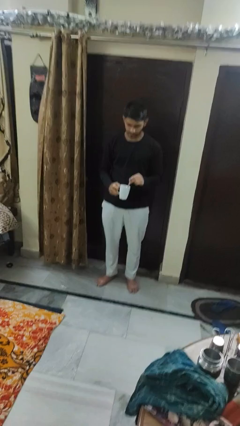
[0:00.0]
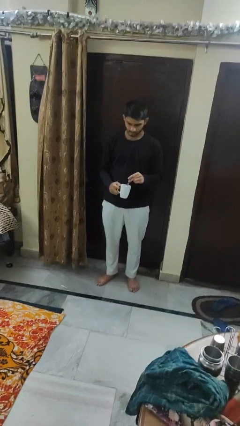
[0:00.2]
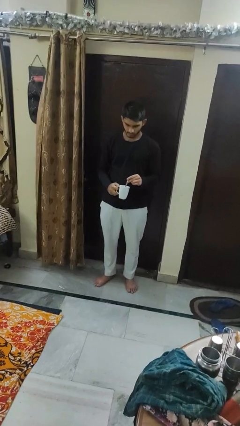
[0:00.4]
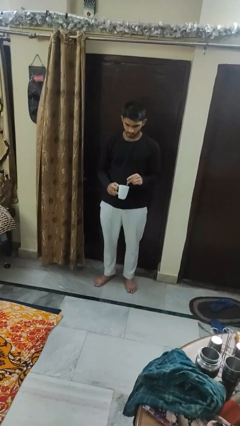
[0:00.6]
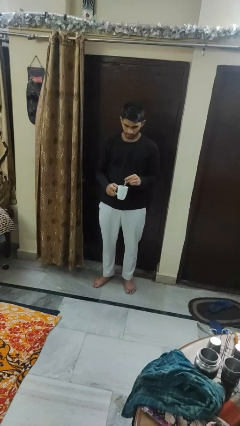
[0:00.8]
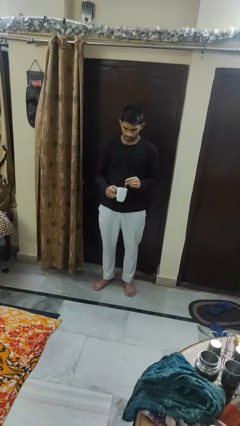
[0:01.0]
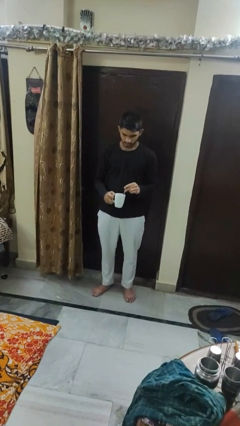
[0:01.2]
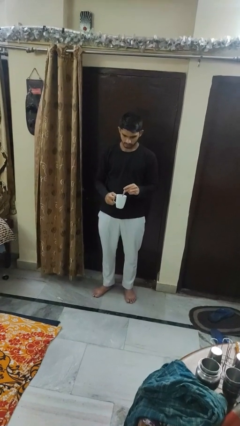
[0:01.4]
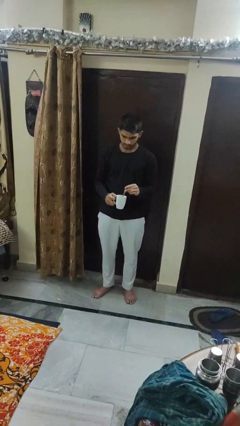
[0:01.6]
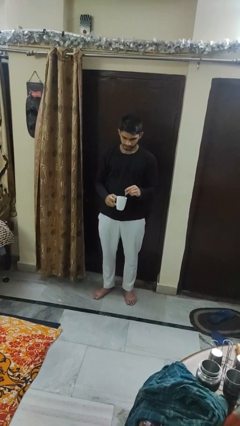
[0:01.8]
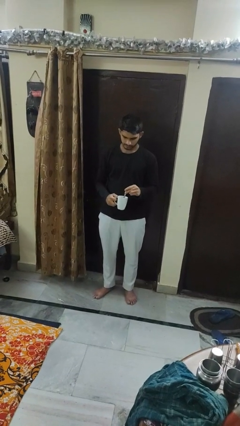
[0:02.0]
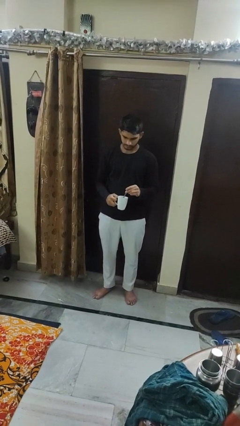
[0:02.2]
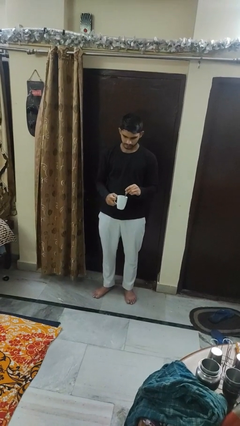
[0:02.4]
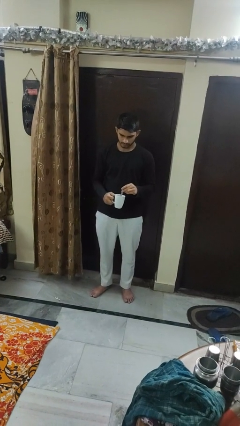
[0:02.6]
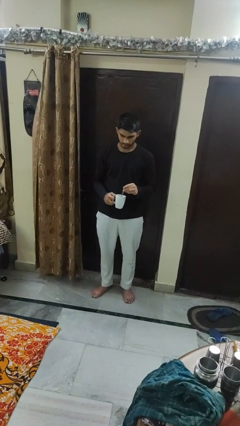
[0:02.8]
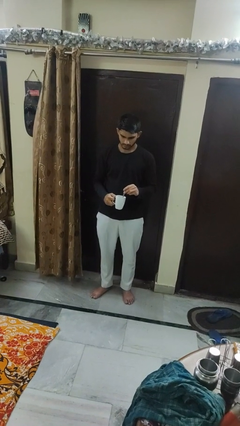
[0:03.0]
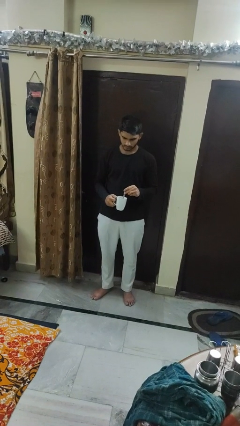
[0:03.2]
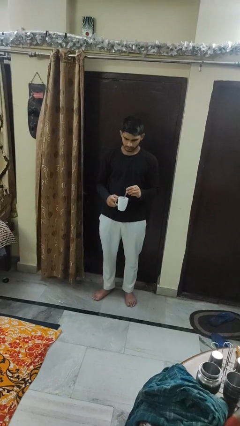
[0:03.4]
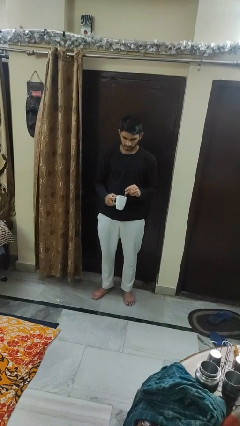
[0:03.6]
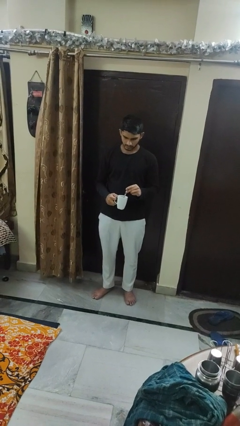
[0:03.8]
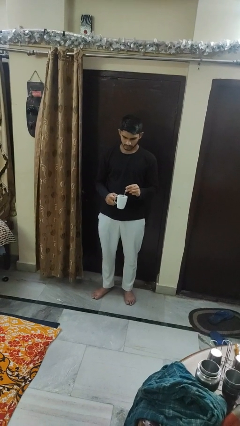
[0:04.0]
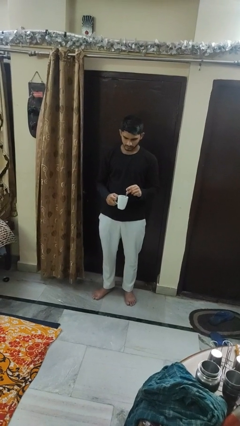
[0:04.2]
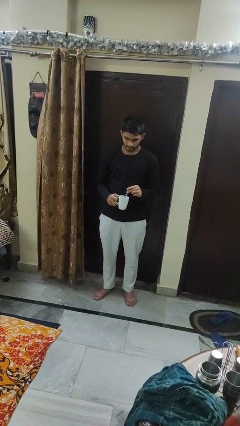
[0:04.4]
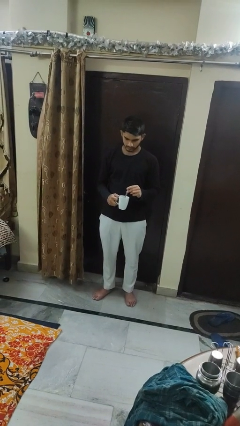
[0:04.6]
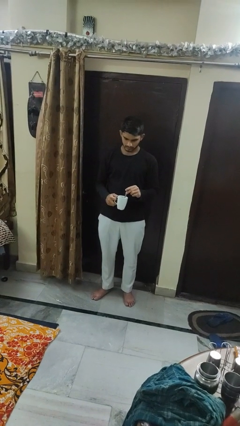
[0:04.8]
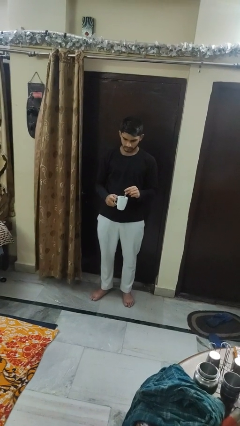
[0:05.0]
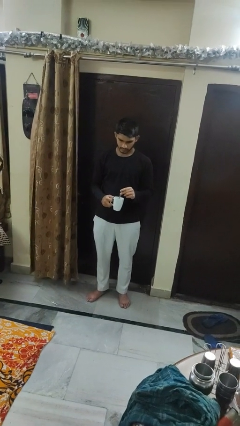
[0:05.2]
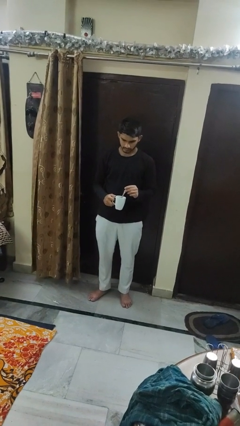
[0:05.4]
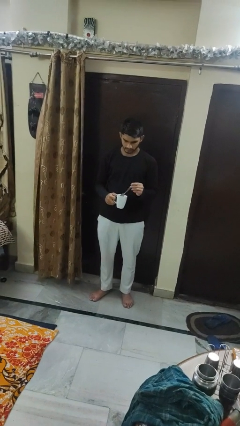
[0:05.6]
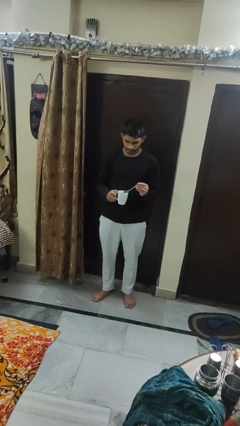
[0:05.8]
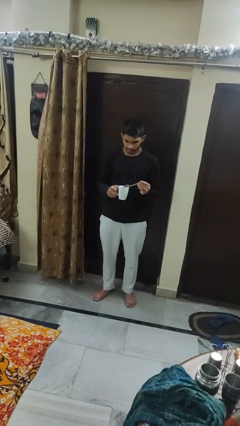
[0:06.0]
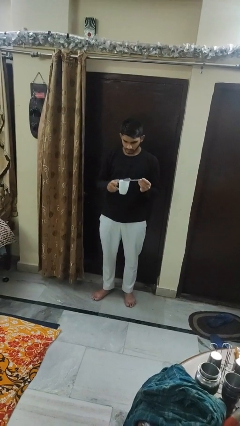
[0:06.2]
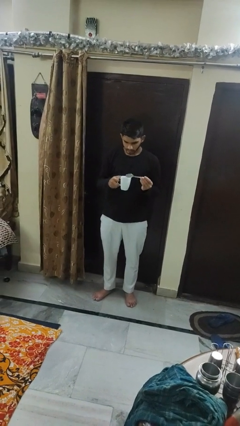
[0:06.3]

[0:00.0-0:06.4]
person stirs mug

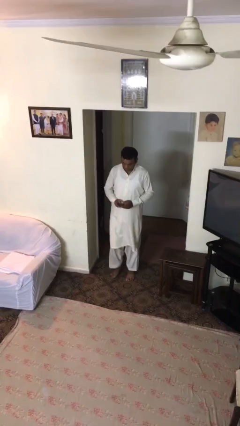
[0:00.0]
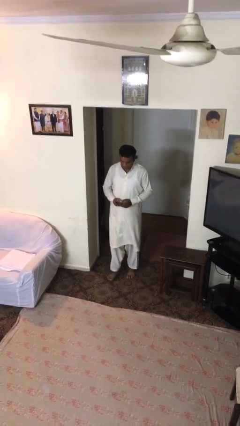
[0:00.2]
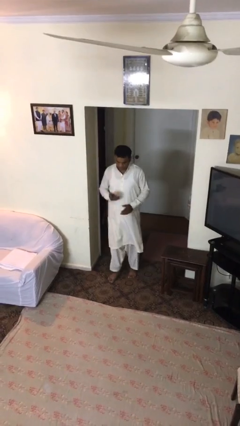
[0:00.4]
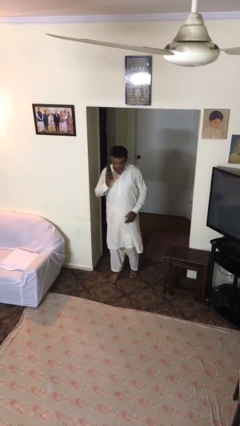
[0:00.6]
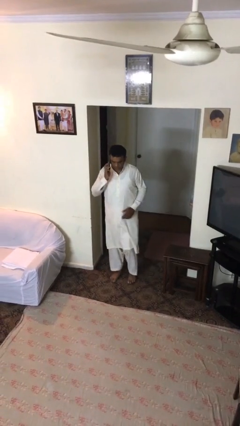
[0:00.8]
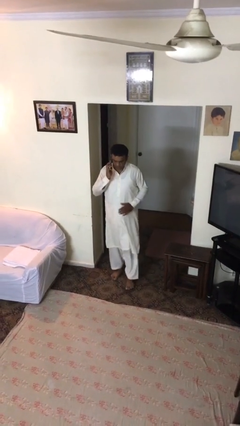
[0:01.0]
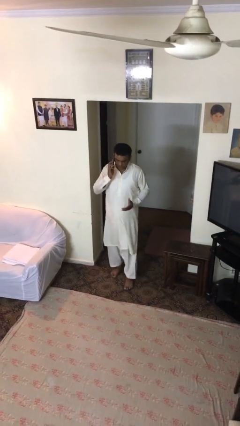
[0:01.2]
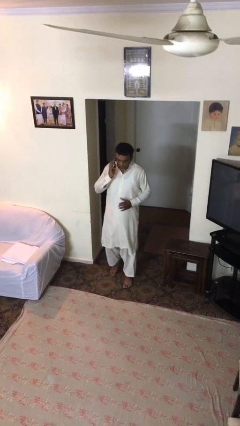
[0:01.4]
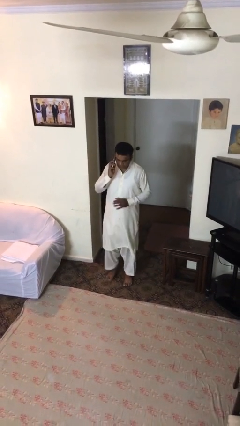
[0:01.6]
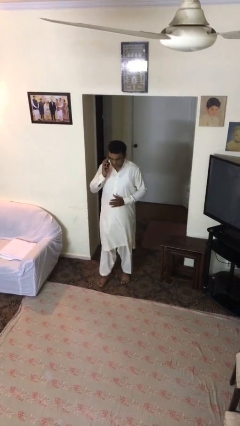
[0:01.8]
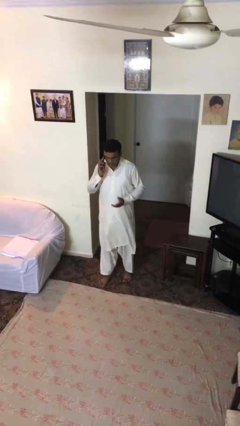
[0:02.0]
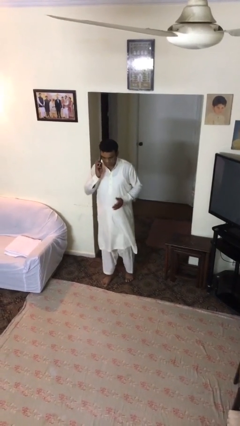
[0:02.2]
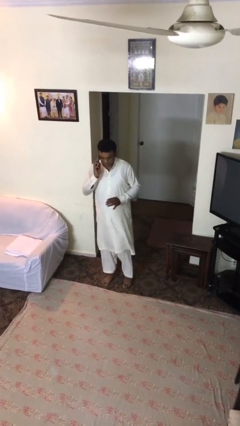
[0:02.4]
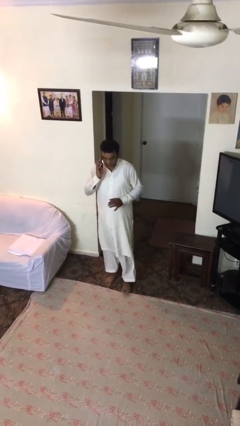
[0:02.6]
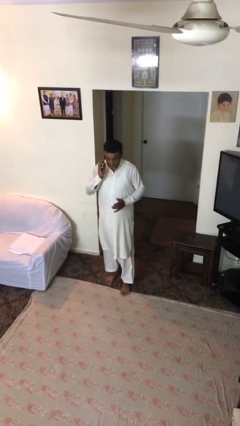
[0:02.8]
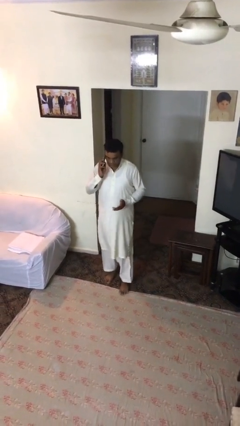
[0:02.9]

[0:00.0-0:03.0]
person talks on phone

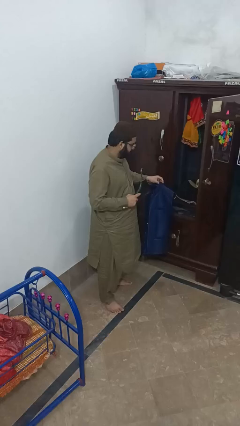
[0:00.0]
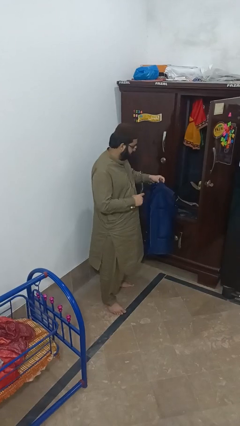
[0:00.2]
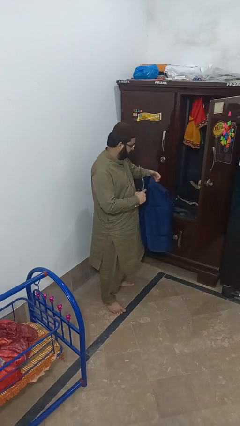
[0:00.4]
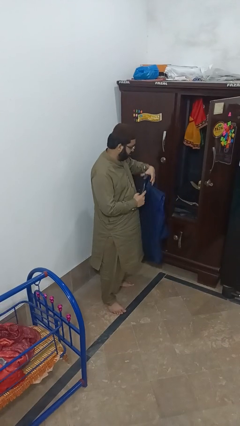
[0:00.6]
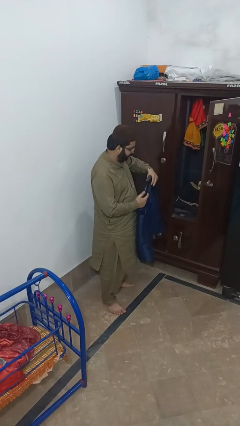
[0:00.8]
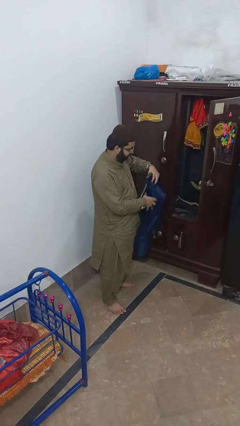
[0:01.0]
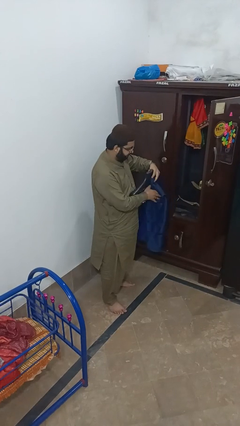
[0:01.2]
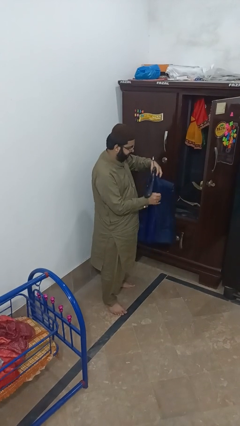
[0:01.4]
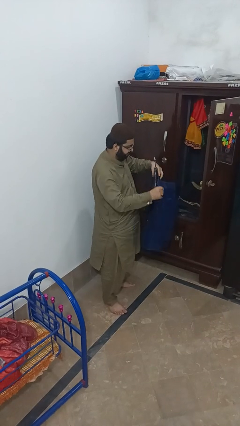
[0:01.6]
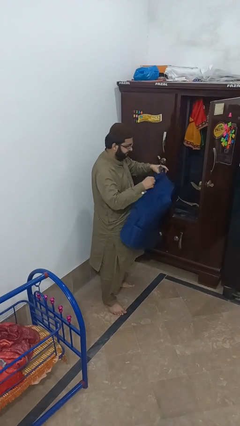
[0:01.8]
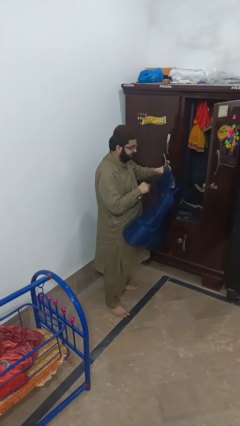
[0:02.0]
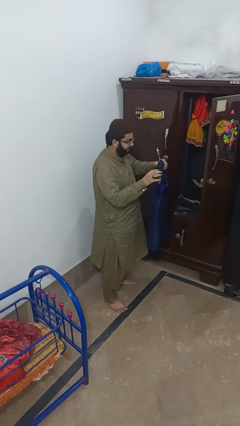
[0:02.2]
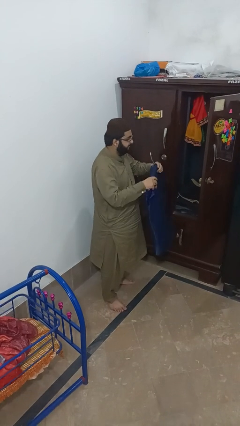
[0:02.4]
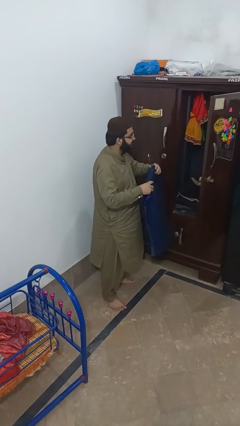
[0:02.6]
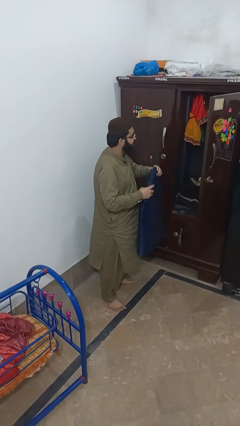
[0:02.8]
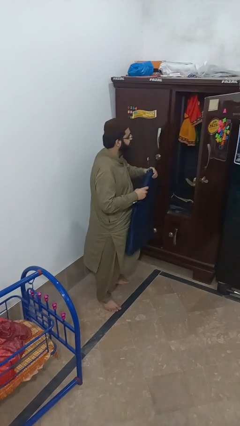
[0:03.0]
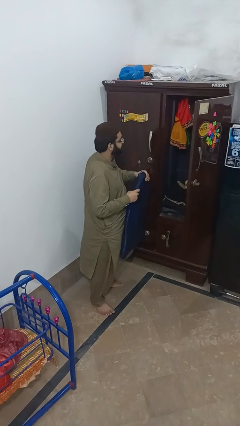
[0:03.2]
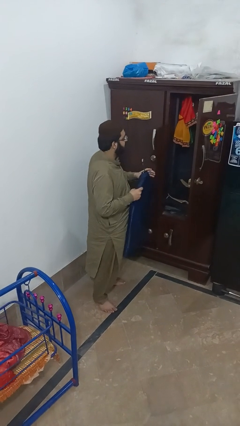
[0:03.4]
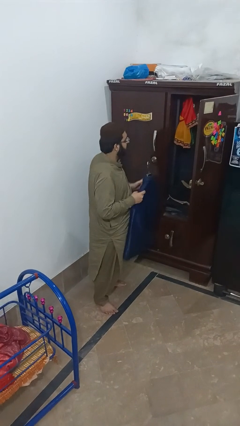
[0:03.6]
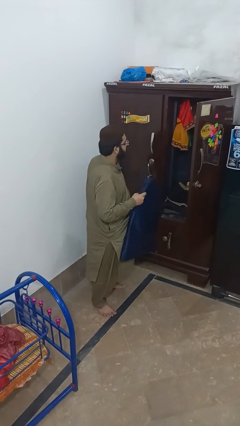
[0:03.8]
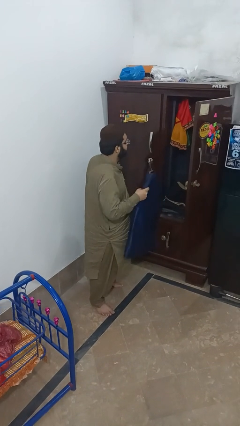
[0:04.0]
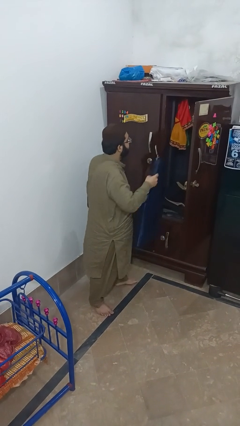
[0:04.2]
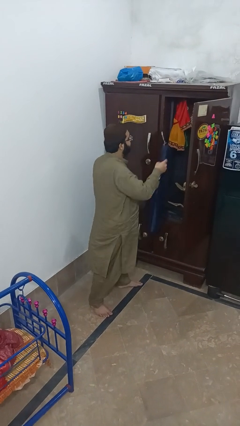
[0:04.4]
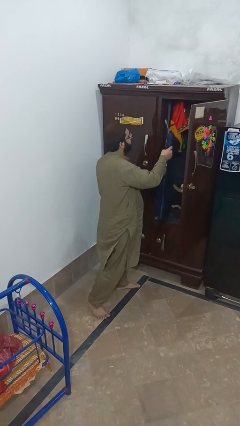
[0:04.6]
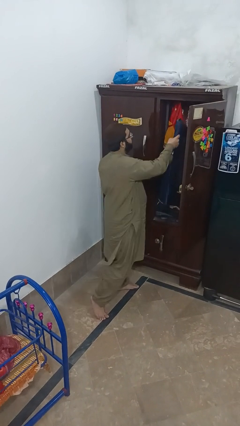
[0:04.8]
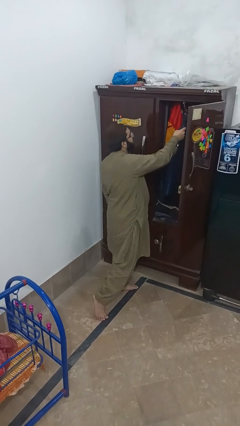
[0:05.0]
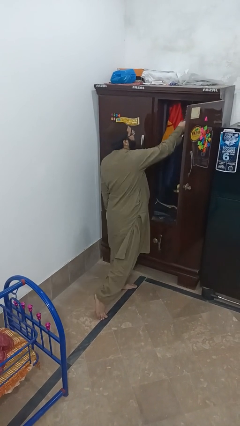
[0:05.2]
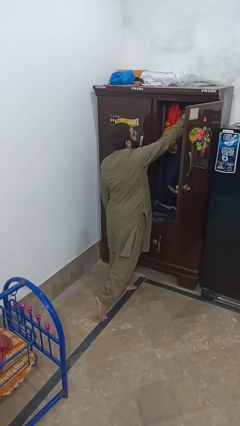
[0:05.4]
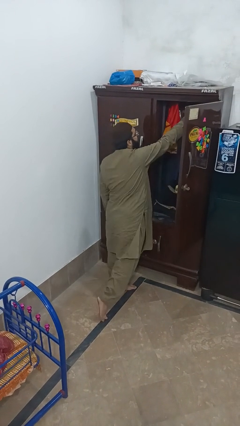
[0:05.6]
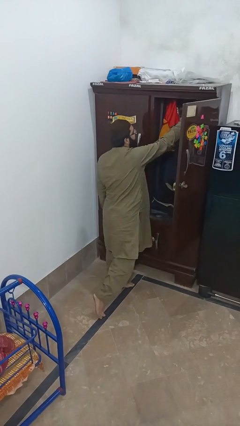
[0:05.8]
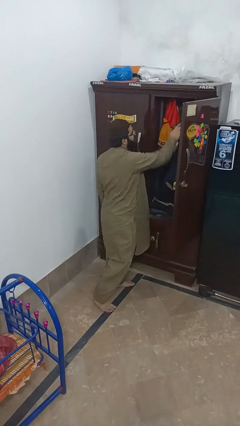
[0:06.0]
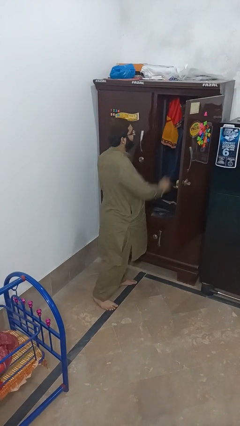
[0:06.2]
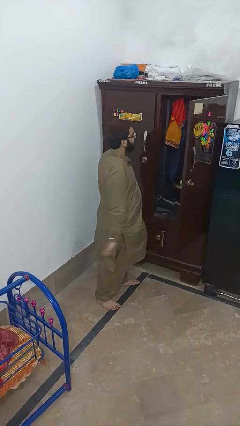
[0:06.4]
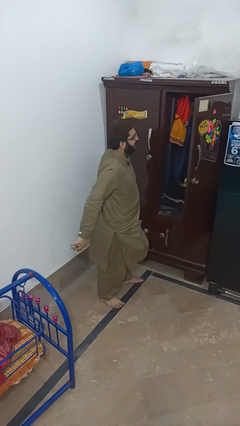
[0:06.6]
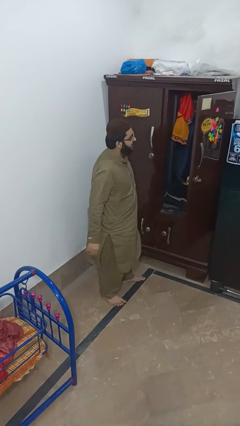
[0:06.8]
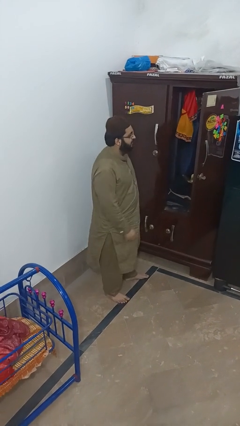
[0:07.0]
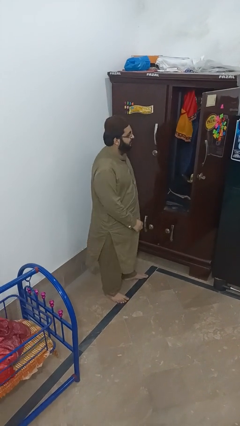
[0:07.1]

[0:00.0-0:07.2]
person puts clothes into closet

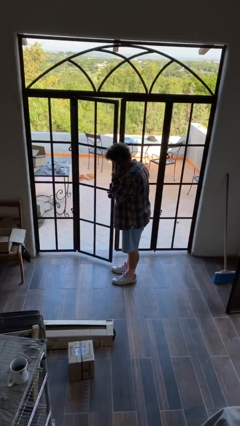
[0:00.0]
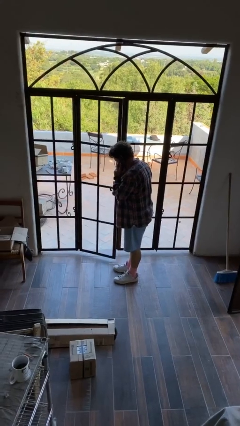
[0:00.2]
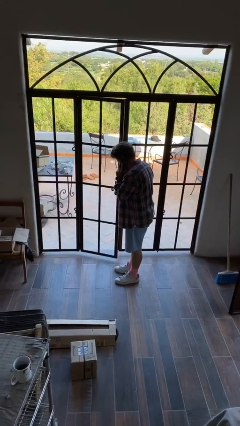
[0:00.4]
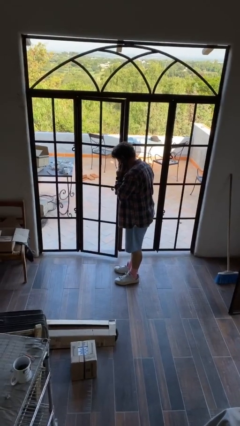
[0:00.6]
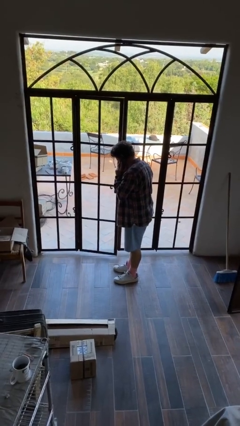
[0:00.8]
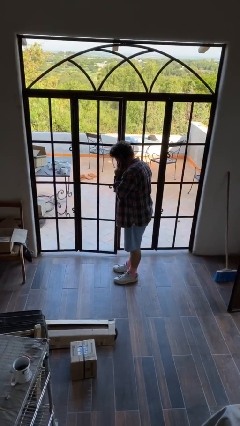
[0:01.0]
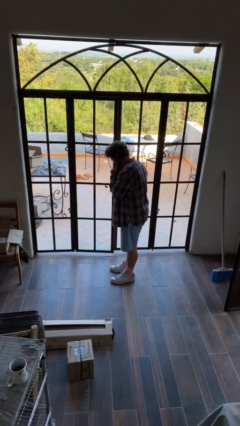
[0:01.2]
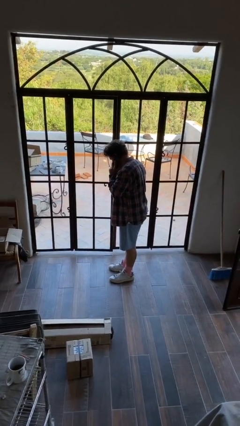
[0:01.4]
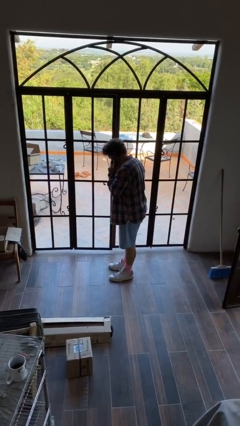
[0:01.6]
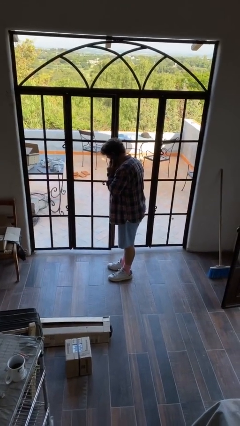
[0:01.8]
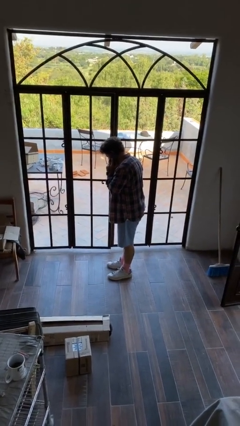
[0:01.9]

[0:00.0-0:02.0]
person closes facility door
